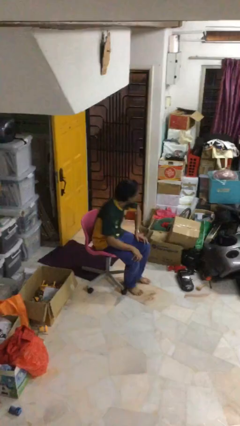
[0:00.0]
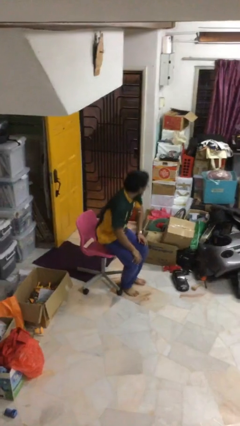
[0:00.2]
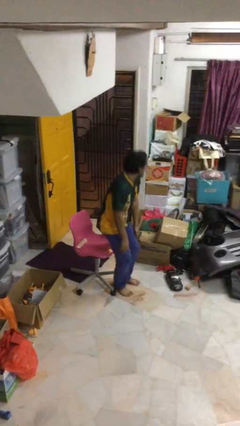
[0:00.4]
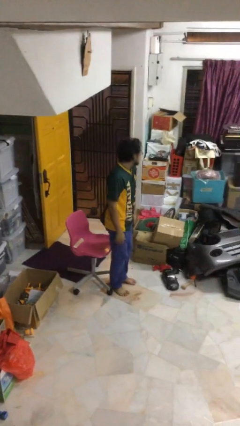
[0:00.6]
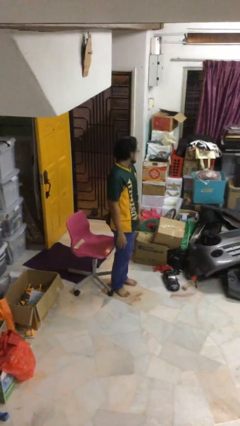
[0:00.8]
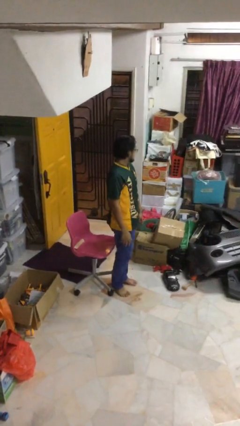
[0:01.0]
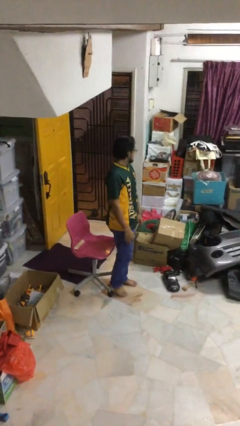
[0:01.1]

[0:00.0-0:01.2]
person stands up

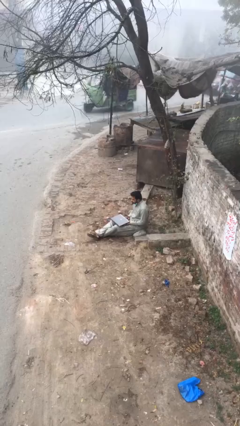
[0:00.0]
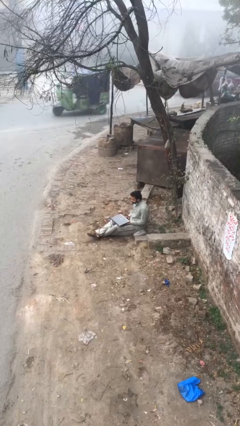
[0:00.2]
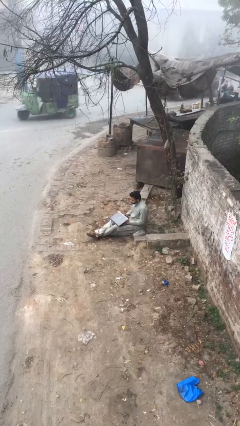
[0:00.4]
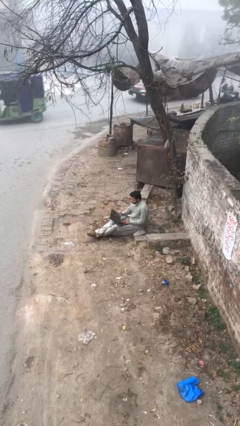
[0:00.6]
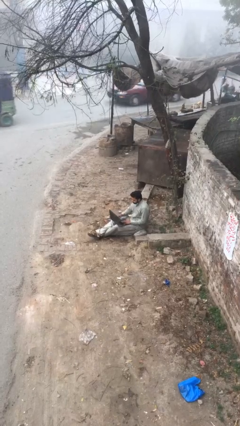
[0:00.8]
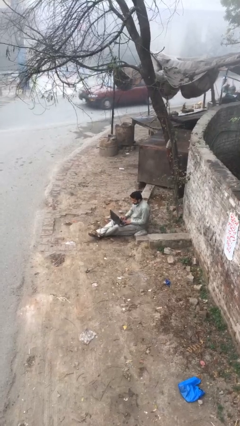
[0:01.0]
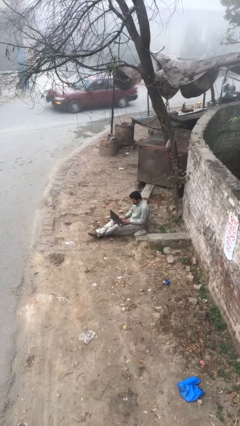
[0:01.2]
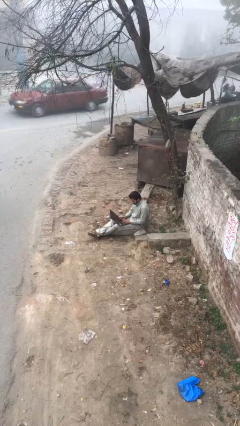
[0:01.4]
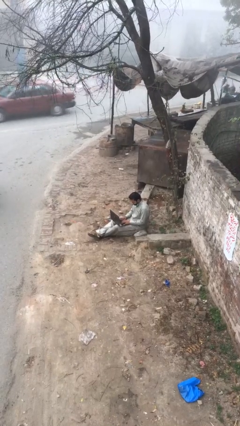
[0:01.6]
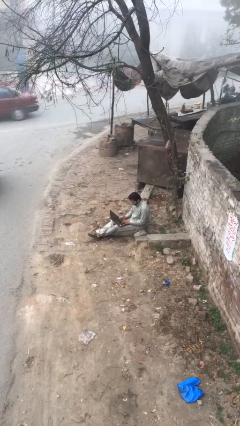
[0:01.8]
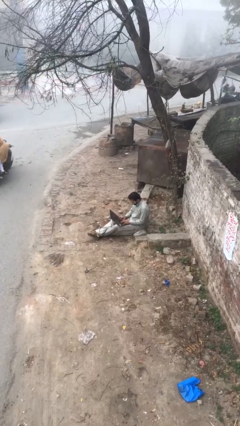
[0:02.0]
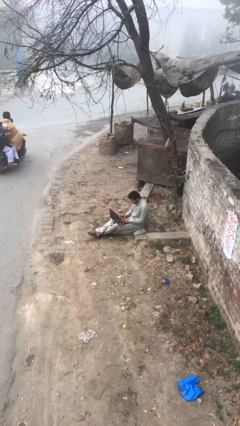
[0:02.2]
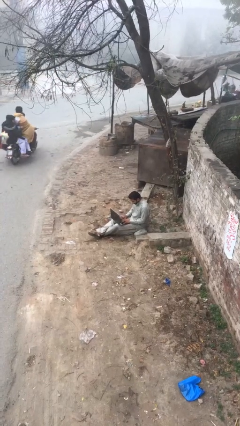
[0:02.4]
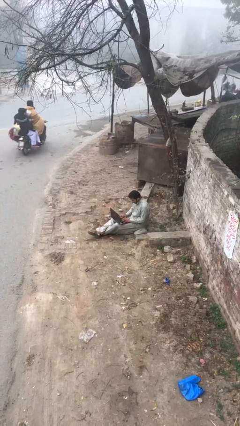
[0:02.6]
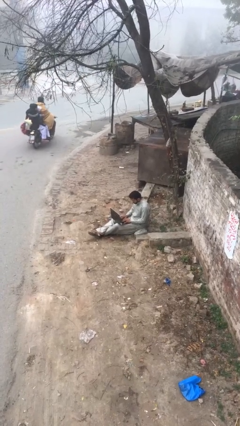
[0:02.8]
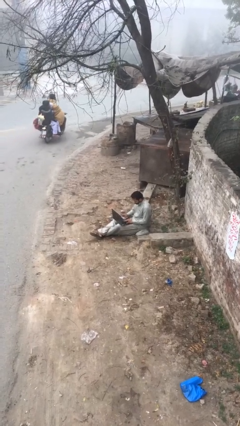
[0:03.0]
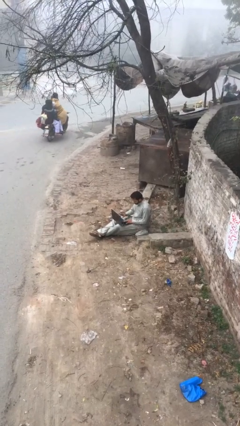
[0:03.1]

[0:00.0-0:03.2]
person interacts with laptop

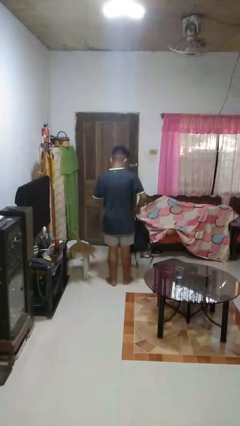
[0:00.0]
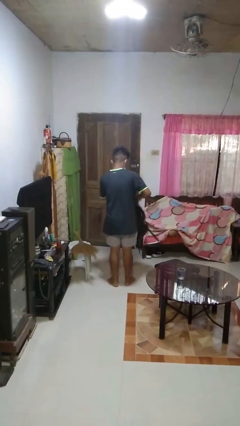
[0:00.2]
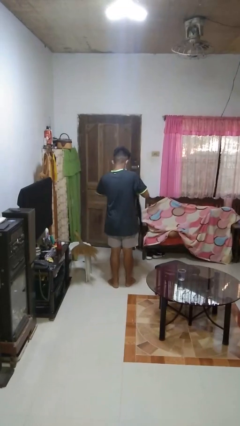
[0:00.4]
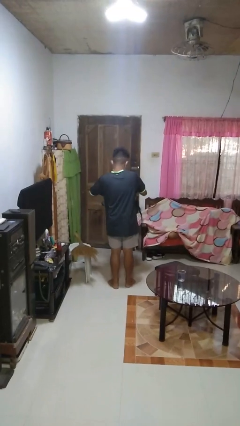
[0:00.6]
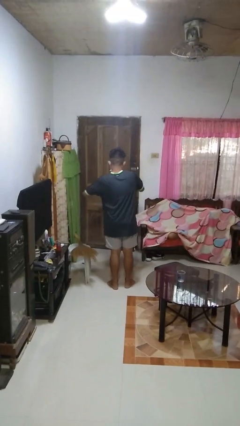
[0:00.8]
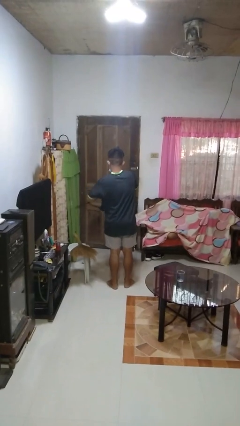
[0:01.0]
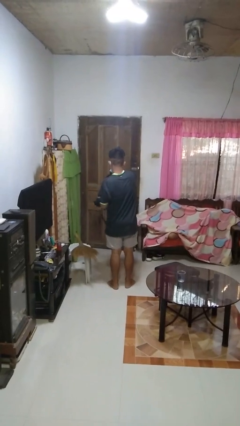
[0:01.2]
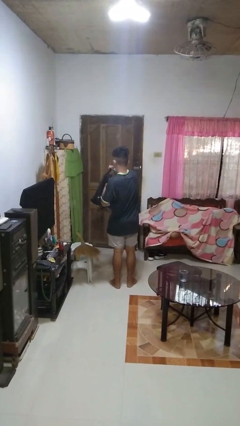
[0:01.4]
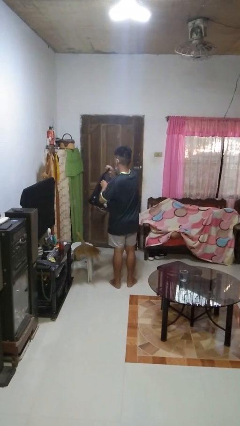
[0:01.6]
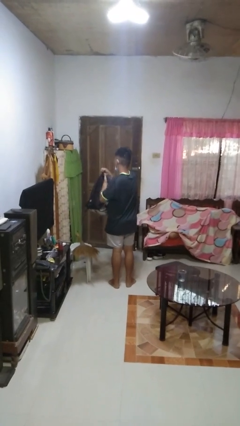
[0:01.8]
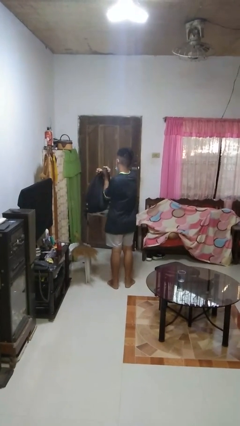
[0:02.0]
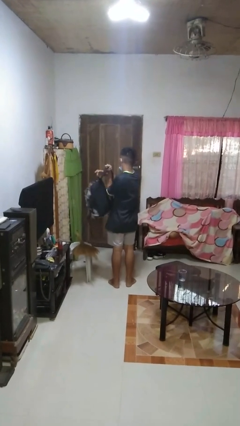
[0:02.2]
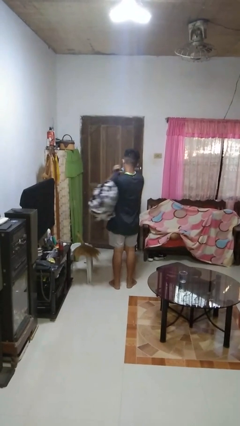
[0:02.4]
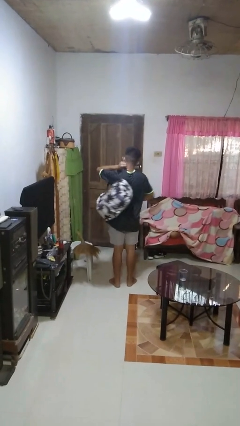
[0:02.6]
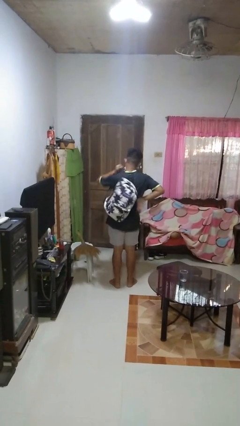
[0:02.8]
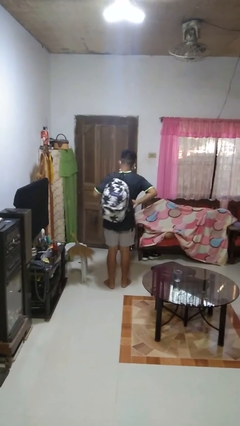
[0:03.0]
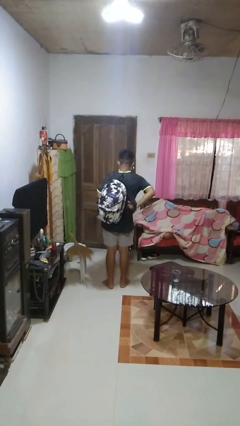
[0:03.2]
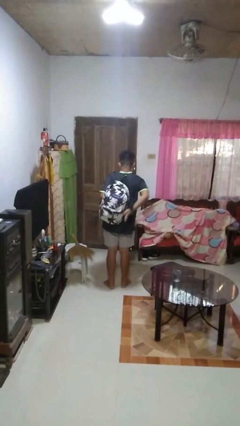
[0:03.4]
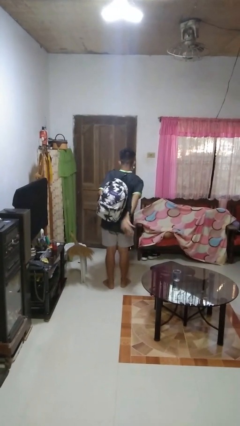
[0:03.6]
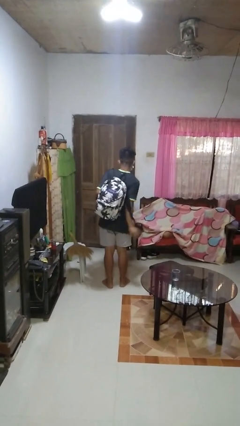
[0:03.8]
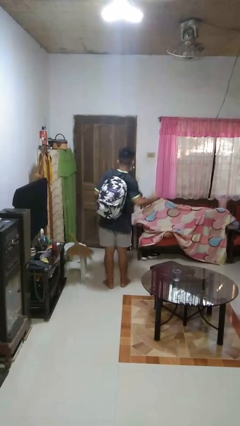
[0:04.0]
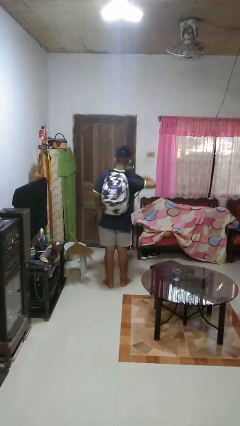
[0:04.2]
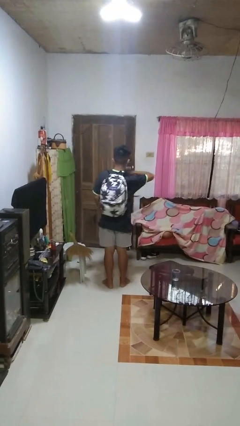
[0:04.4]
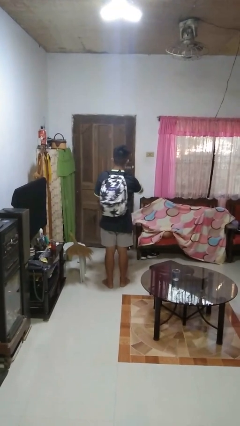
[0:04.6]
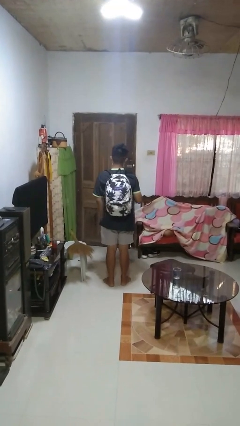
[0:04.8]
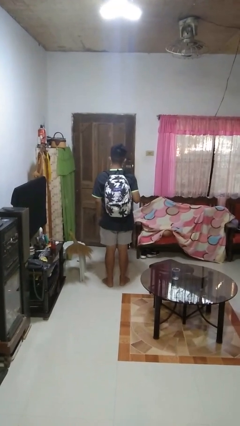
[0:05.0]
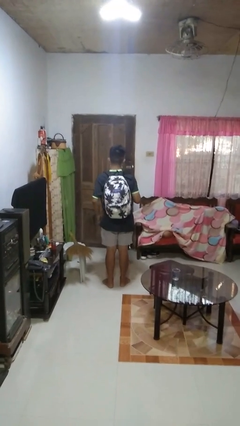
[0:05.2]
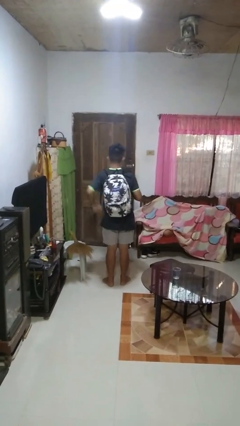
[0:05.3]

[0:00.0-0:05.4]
person puts on backpack

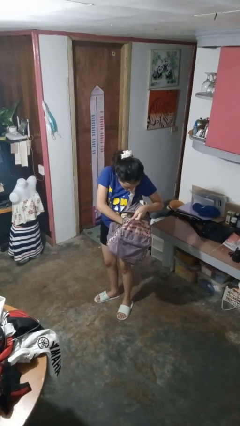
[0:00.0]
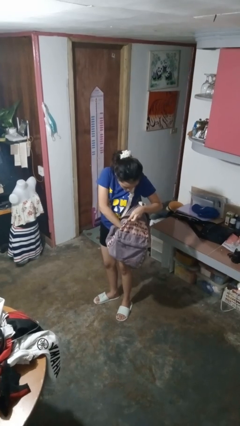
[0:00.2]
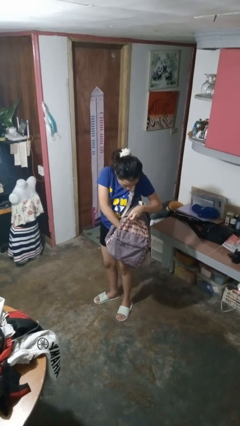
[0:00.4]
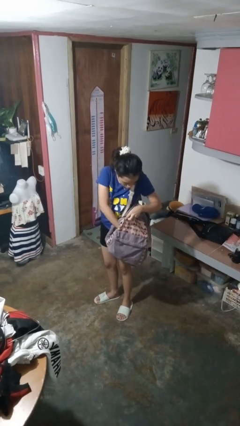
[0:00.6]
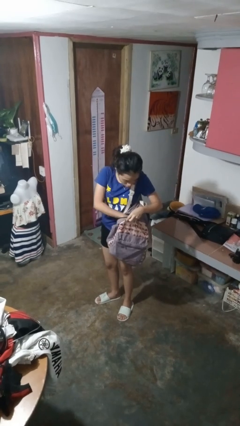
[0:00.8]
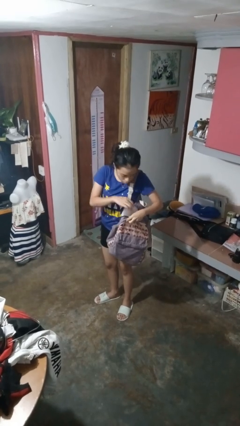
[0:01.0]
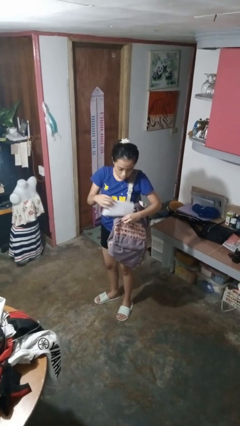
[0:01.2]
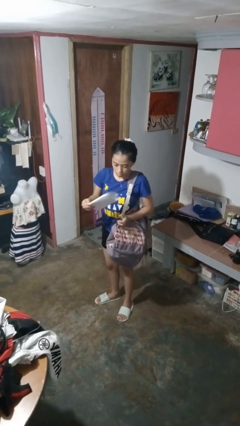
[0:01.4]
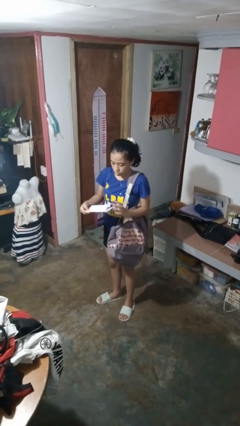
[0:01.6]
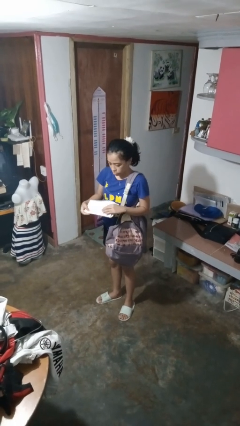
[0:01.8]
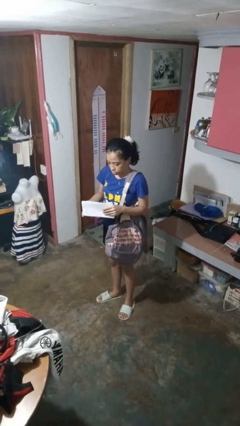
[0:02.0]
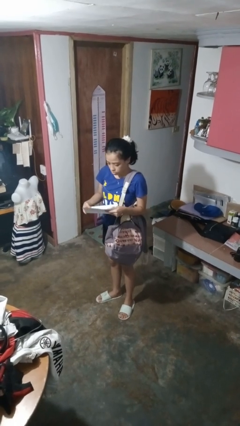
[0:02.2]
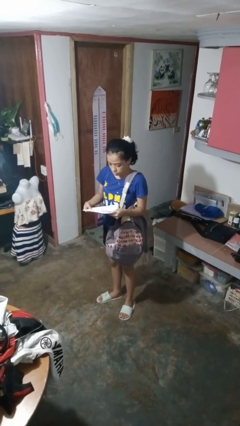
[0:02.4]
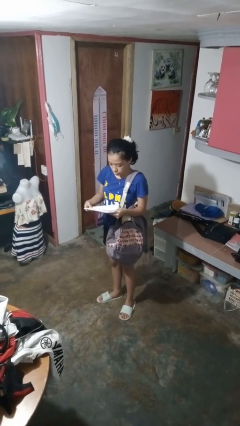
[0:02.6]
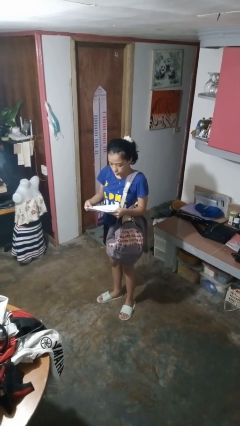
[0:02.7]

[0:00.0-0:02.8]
person takes object from backpack

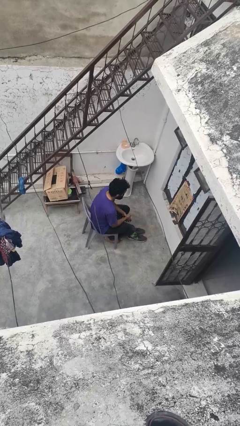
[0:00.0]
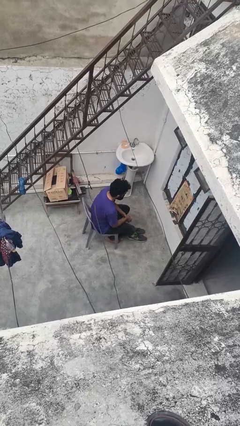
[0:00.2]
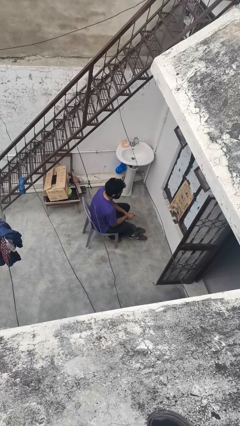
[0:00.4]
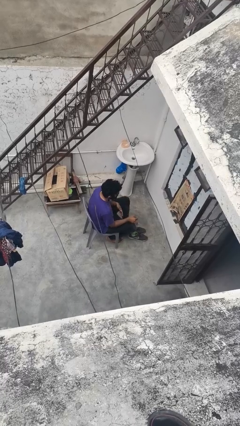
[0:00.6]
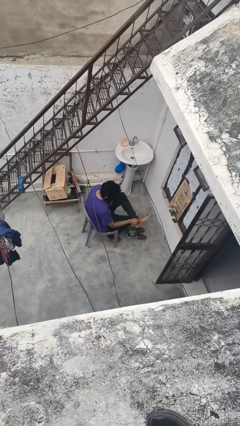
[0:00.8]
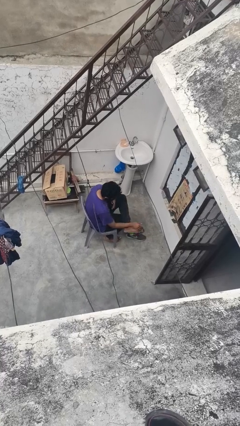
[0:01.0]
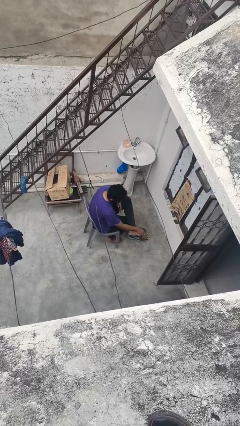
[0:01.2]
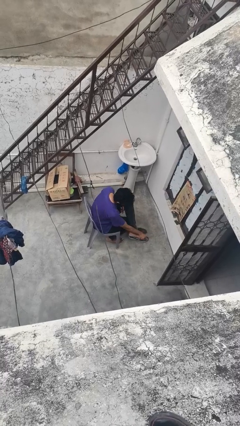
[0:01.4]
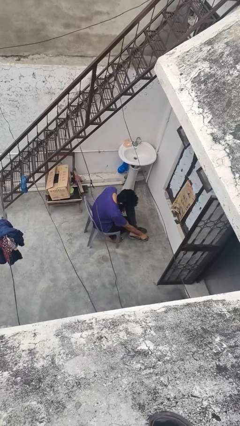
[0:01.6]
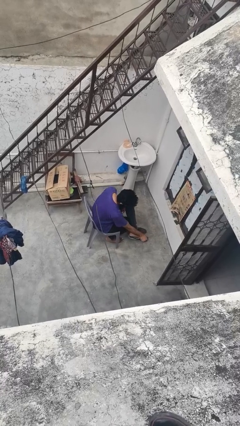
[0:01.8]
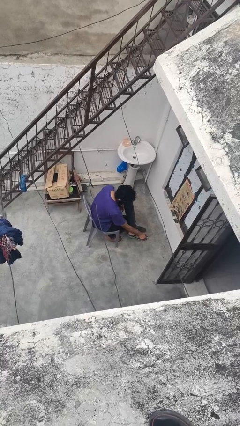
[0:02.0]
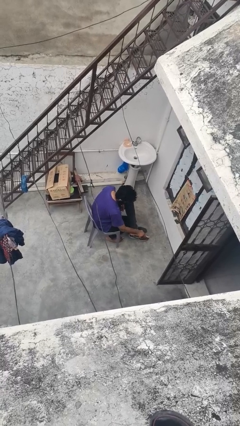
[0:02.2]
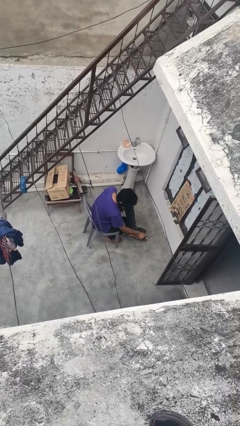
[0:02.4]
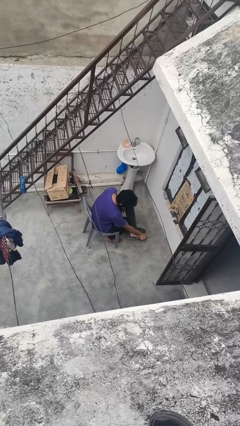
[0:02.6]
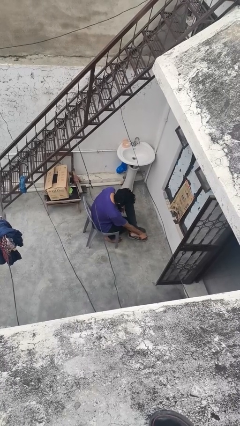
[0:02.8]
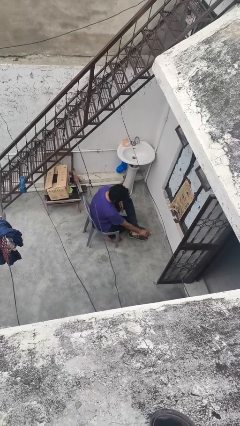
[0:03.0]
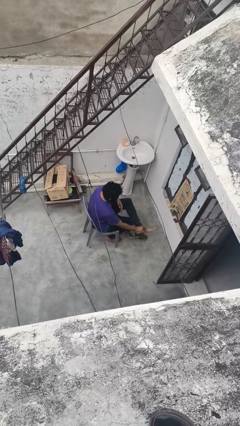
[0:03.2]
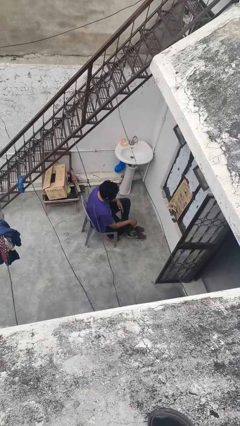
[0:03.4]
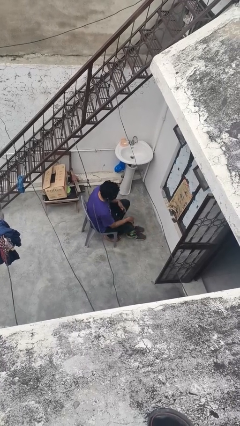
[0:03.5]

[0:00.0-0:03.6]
person rubs foot

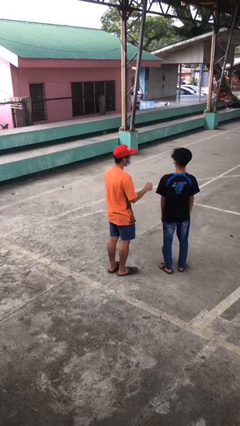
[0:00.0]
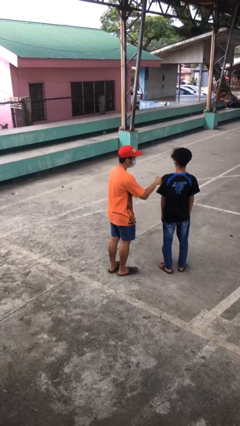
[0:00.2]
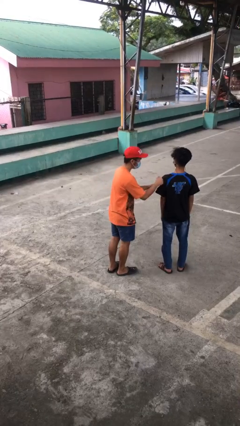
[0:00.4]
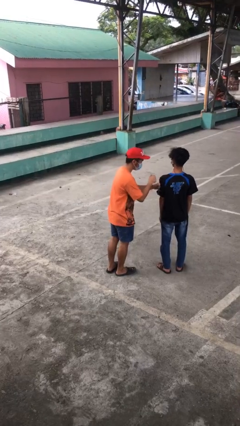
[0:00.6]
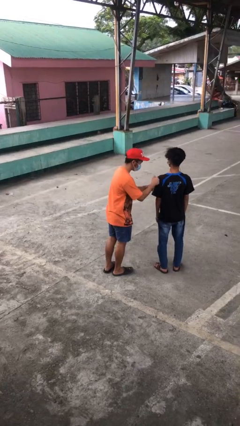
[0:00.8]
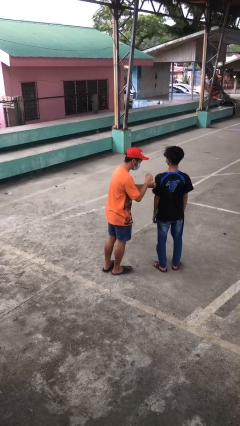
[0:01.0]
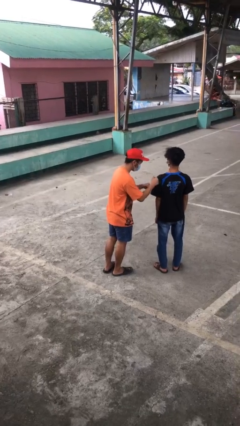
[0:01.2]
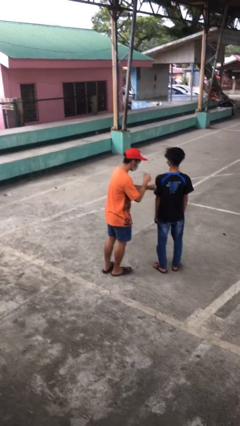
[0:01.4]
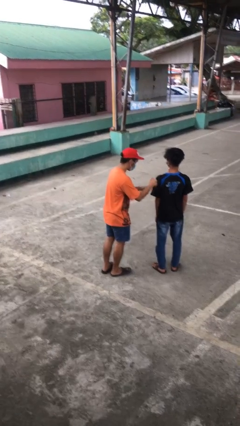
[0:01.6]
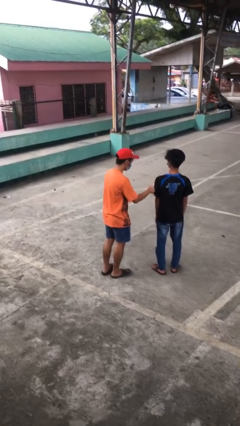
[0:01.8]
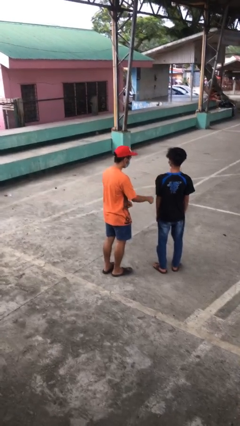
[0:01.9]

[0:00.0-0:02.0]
person pounds shoulders of person
